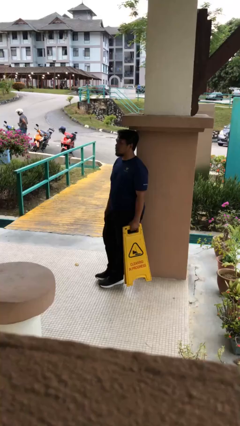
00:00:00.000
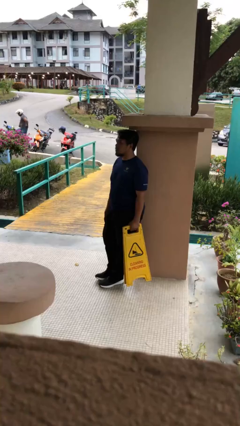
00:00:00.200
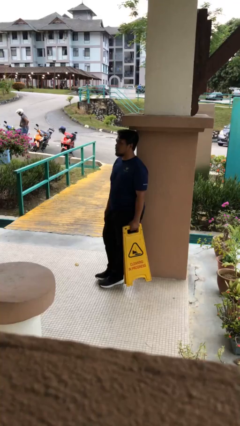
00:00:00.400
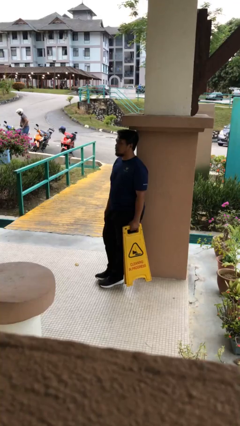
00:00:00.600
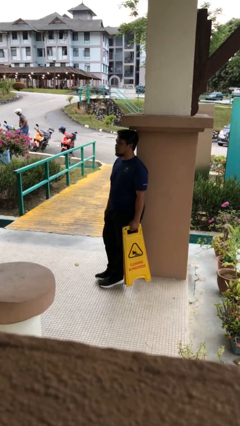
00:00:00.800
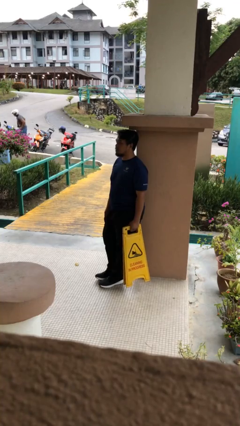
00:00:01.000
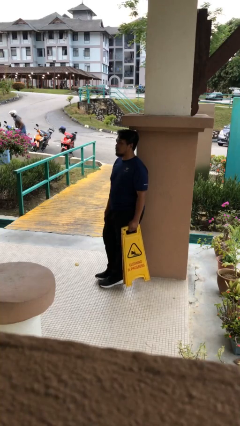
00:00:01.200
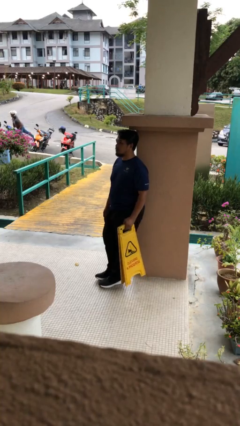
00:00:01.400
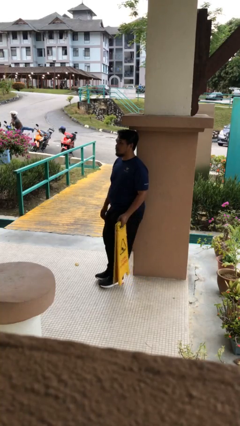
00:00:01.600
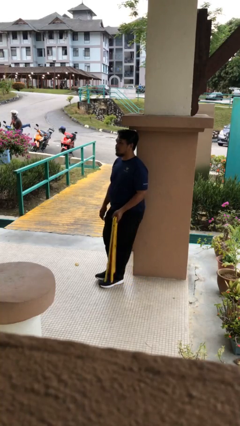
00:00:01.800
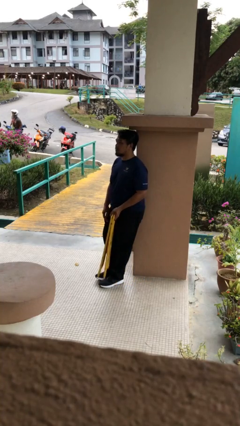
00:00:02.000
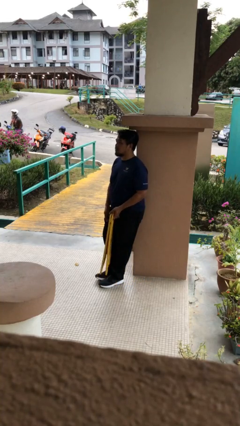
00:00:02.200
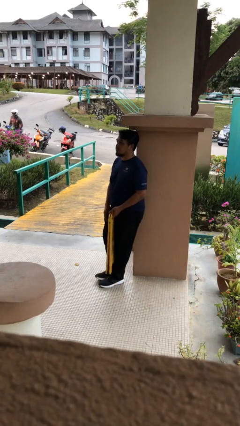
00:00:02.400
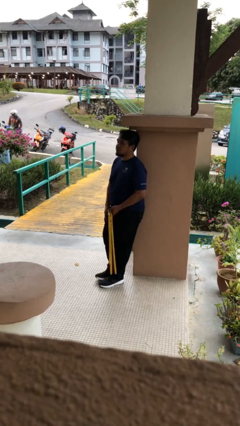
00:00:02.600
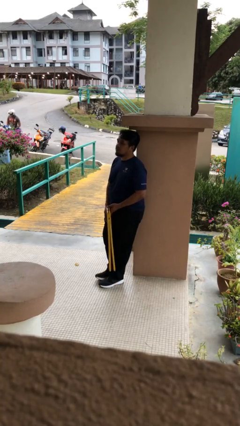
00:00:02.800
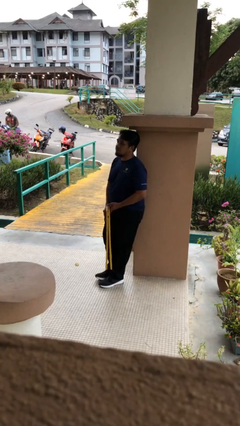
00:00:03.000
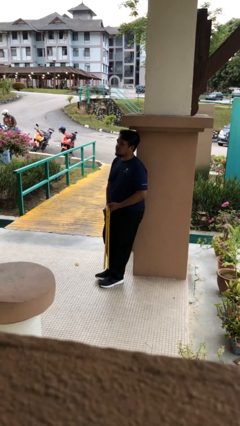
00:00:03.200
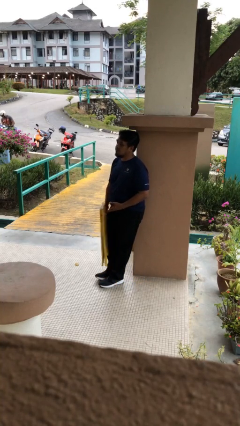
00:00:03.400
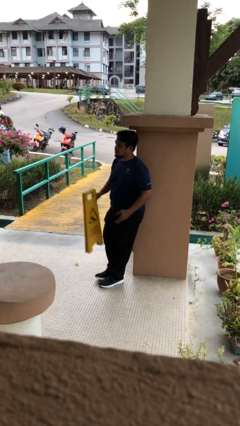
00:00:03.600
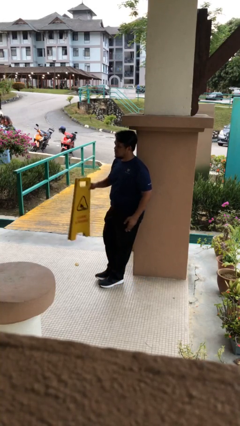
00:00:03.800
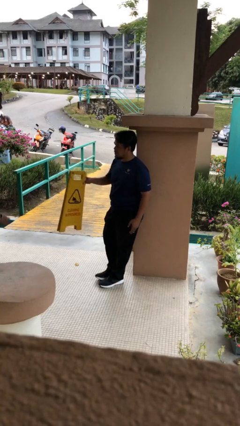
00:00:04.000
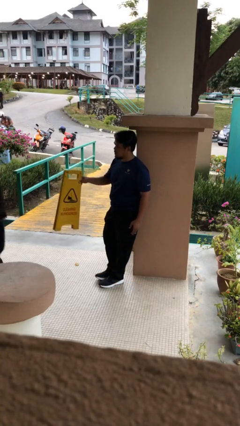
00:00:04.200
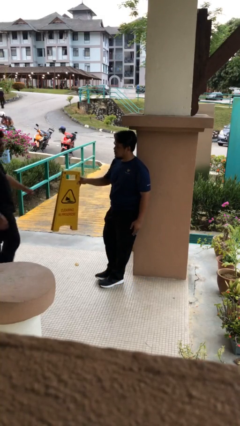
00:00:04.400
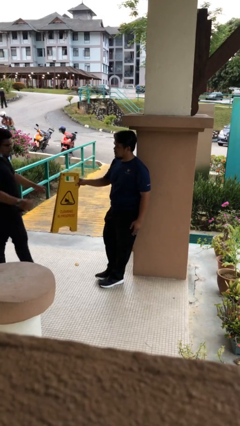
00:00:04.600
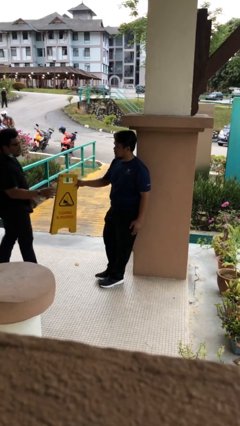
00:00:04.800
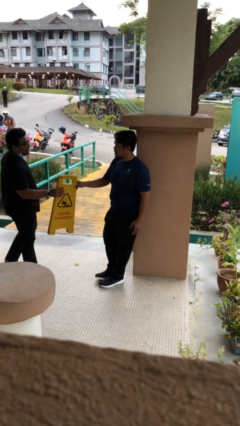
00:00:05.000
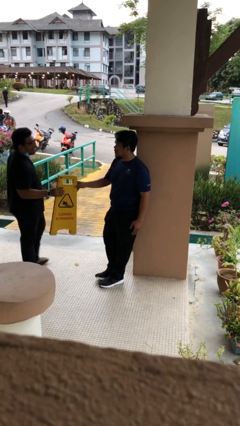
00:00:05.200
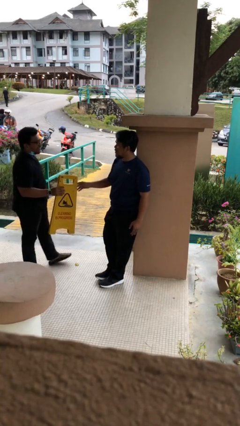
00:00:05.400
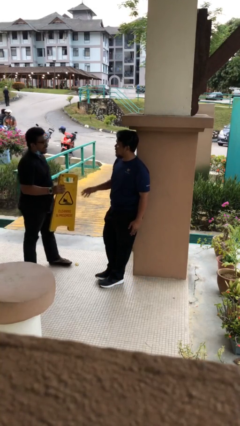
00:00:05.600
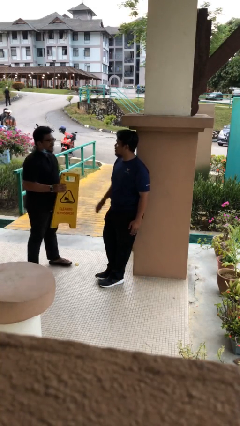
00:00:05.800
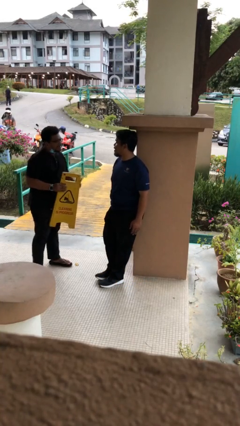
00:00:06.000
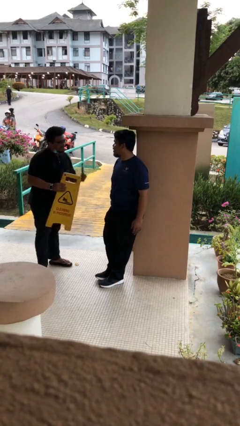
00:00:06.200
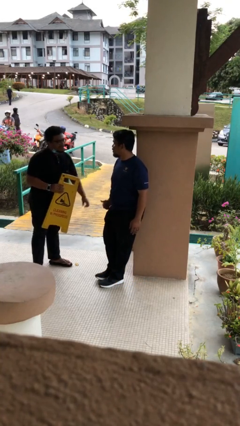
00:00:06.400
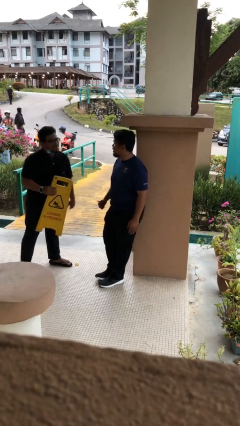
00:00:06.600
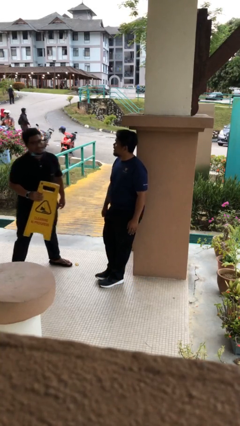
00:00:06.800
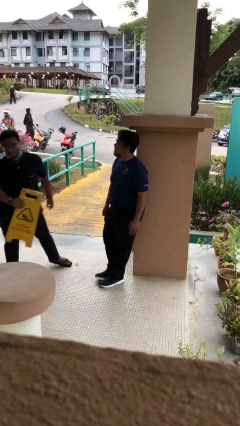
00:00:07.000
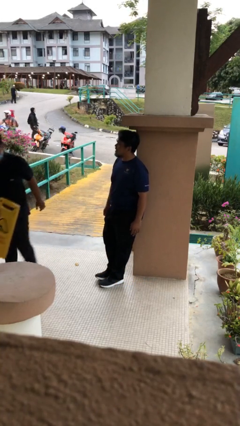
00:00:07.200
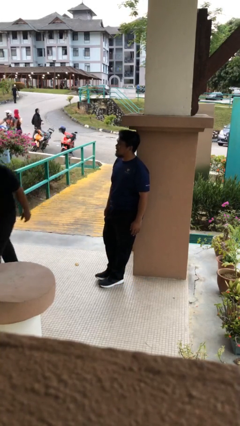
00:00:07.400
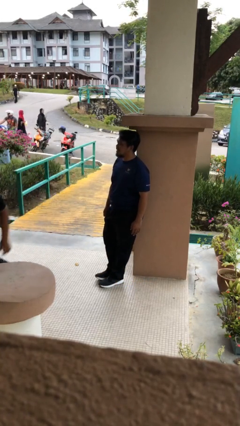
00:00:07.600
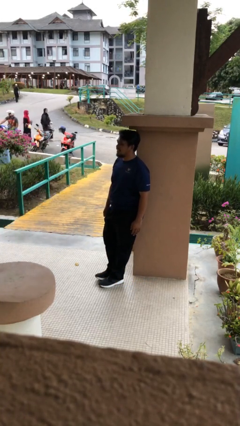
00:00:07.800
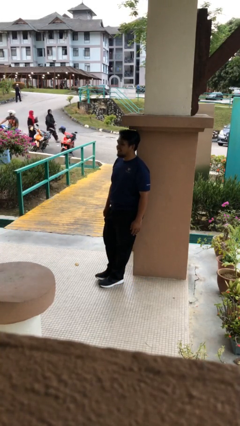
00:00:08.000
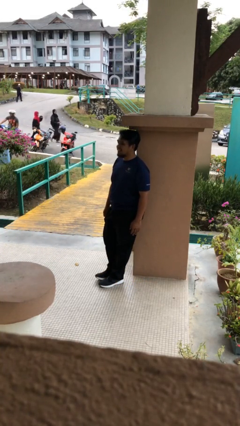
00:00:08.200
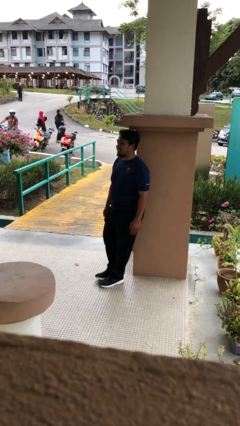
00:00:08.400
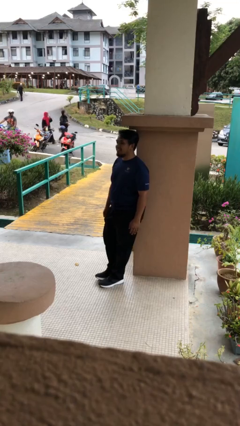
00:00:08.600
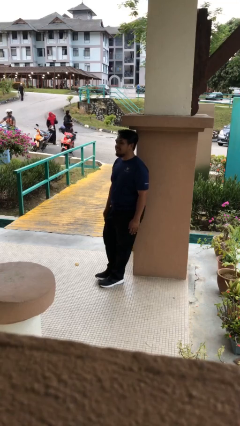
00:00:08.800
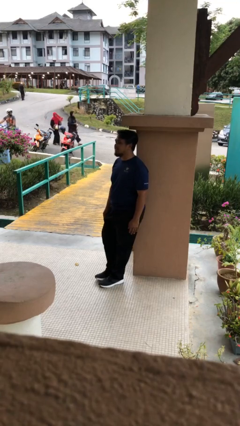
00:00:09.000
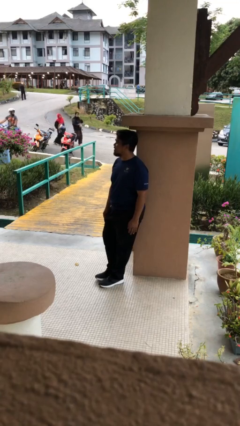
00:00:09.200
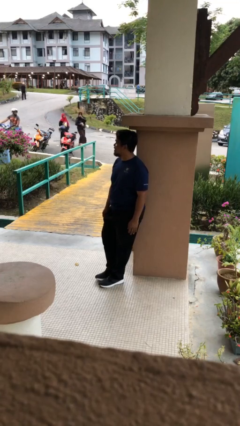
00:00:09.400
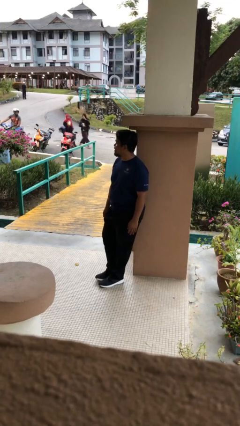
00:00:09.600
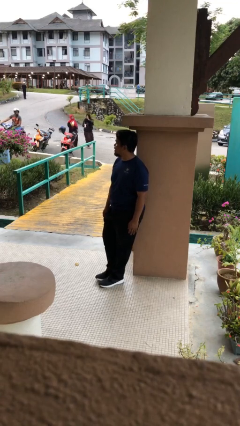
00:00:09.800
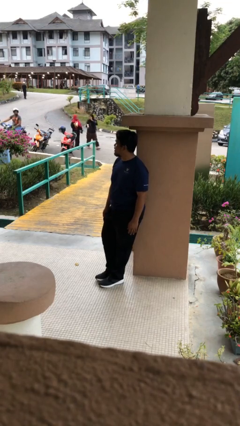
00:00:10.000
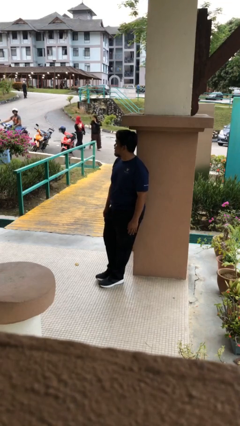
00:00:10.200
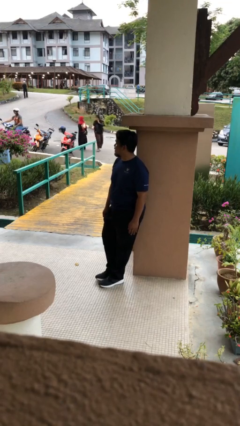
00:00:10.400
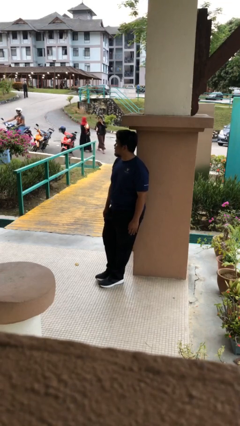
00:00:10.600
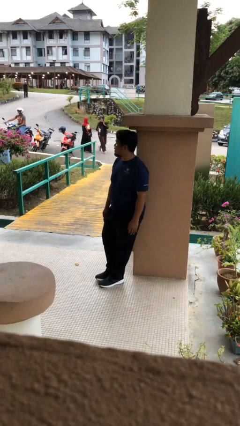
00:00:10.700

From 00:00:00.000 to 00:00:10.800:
person transfers object to person

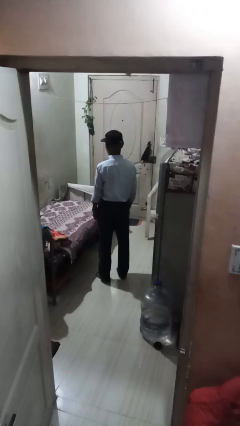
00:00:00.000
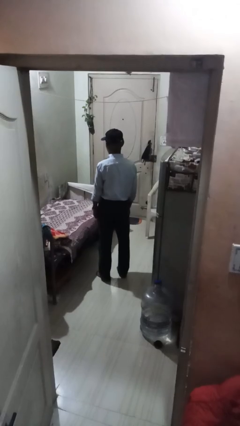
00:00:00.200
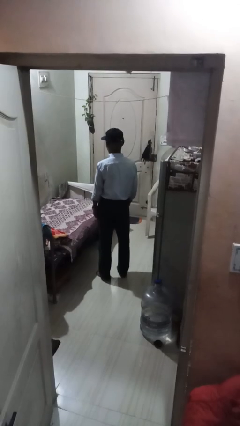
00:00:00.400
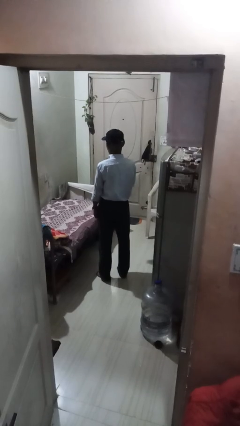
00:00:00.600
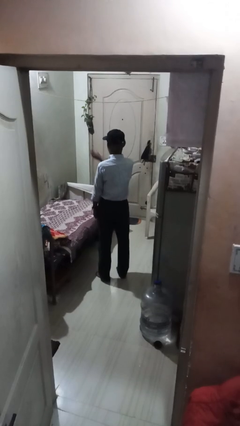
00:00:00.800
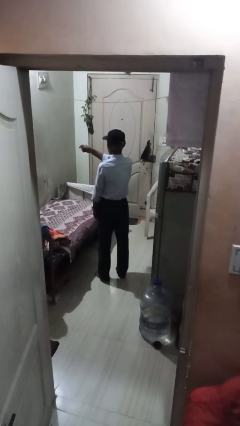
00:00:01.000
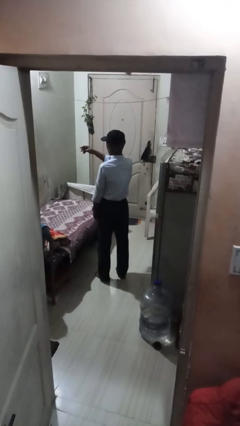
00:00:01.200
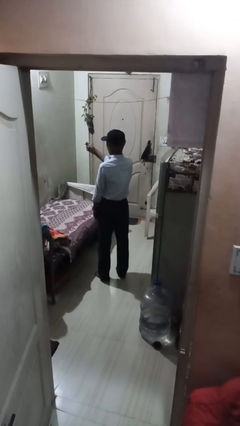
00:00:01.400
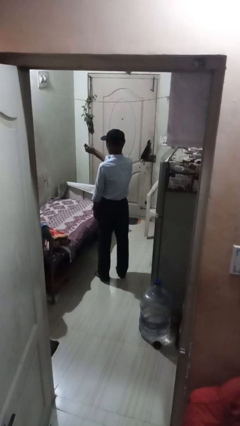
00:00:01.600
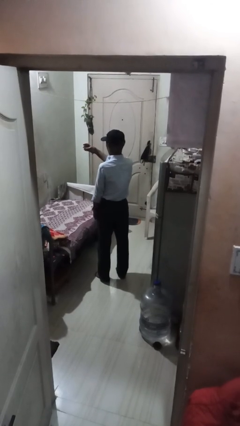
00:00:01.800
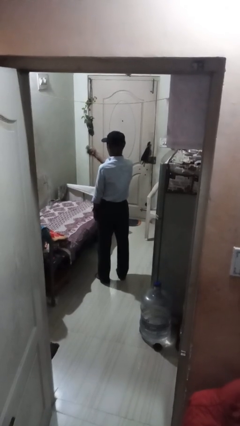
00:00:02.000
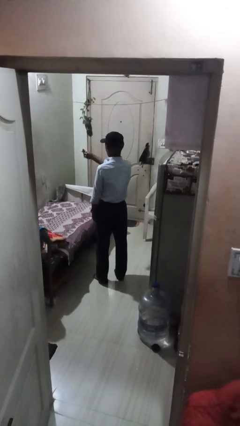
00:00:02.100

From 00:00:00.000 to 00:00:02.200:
person snaps fingers

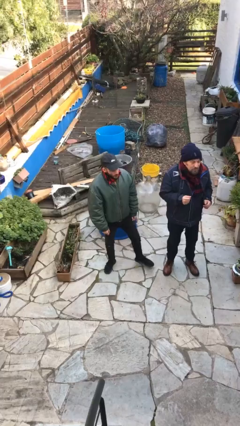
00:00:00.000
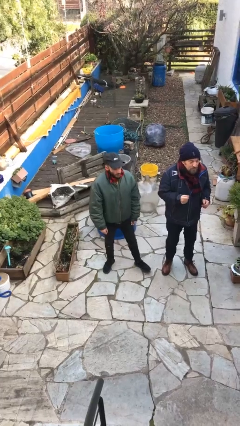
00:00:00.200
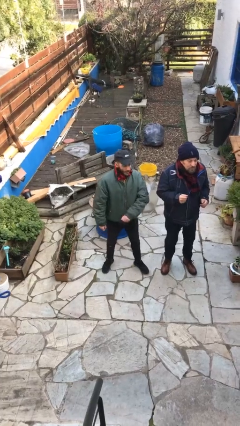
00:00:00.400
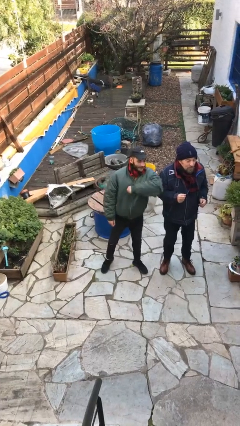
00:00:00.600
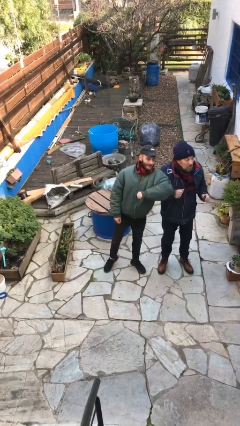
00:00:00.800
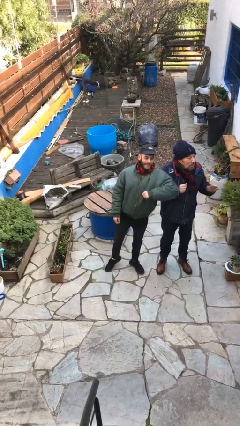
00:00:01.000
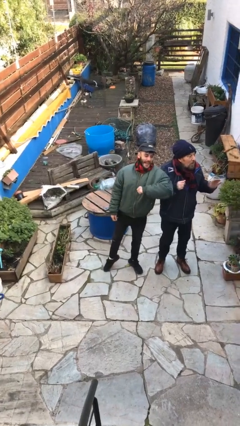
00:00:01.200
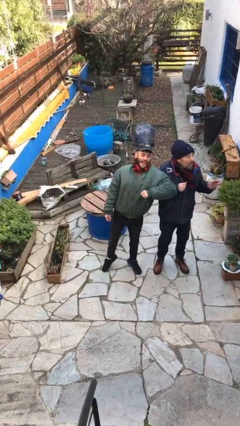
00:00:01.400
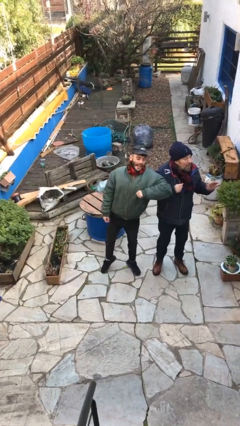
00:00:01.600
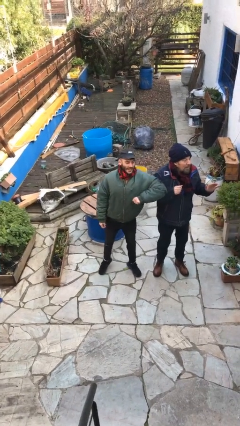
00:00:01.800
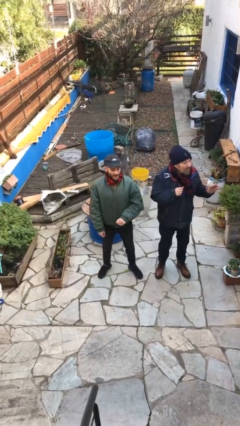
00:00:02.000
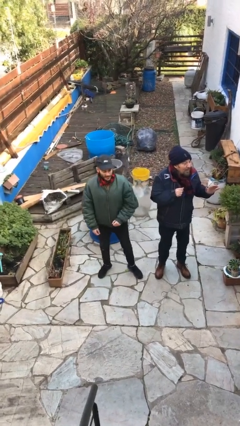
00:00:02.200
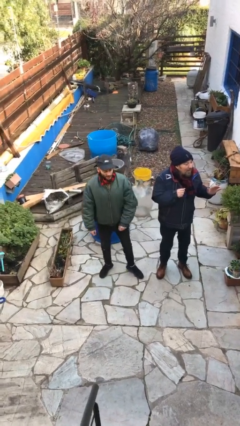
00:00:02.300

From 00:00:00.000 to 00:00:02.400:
person nudges person with elbow

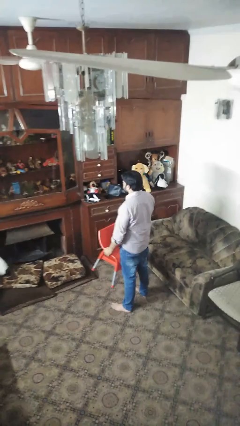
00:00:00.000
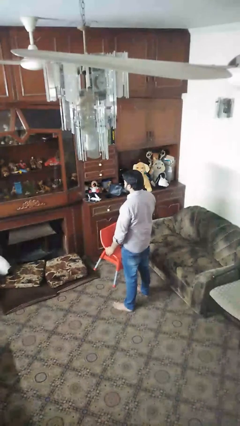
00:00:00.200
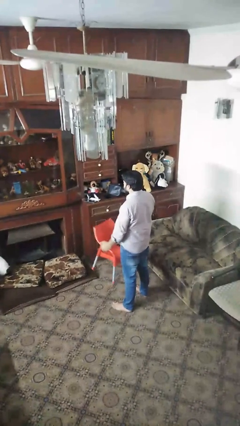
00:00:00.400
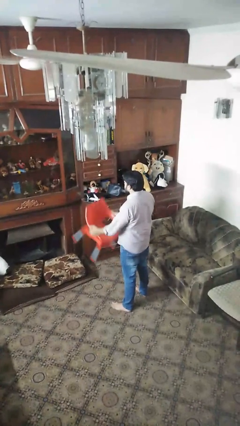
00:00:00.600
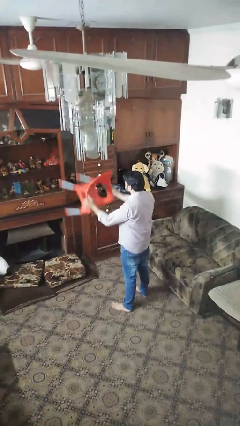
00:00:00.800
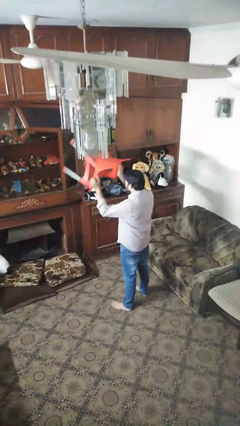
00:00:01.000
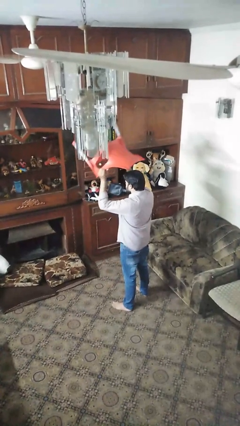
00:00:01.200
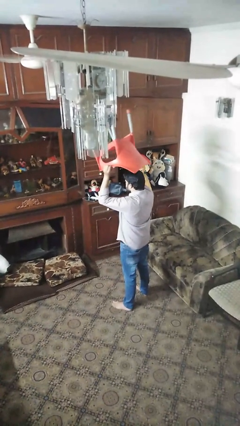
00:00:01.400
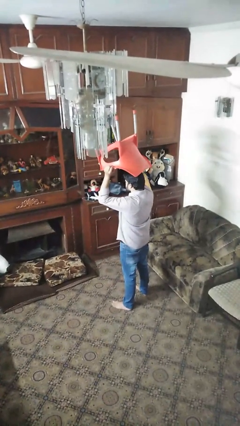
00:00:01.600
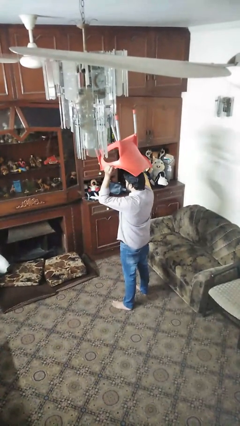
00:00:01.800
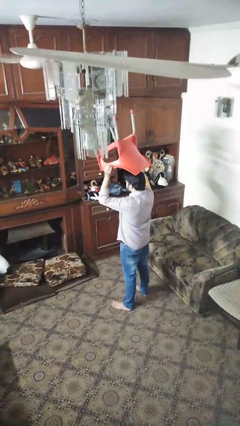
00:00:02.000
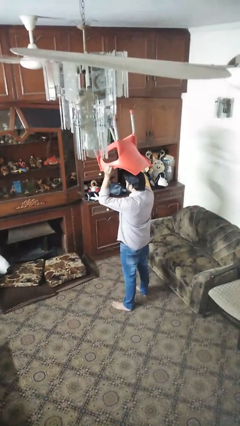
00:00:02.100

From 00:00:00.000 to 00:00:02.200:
person holds object above head
